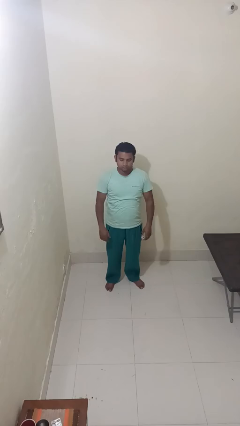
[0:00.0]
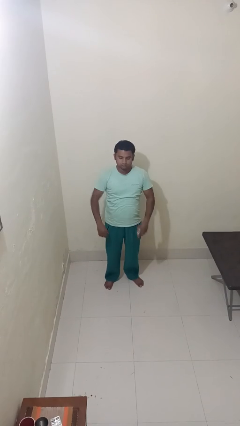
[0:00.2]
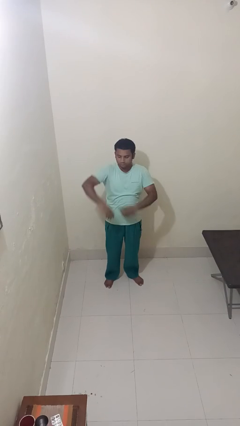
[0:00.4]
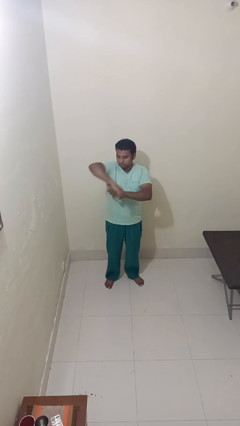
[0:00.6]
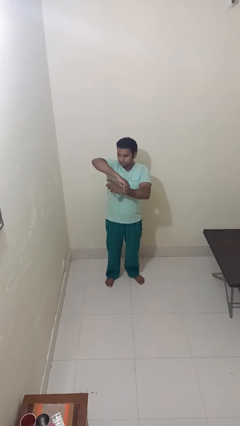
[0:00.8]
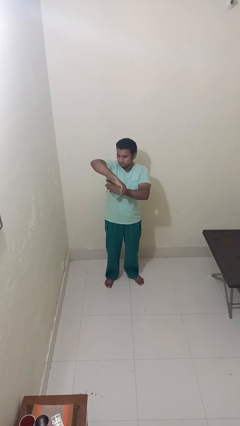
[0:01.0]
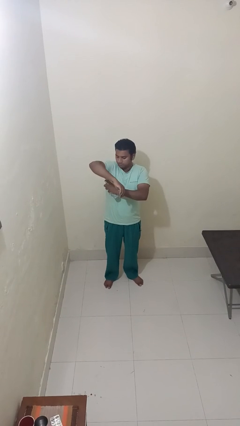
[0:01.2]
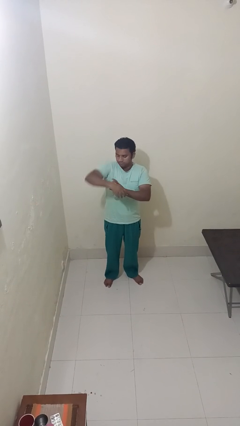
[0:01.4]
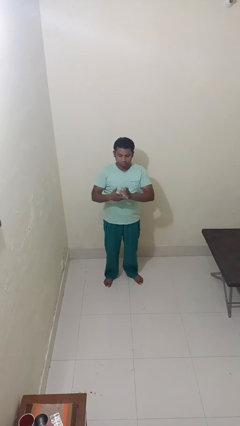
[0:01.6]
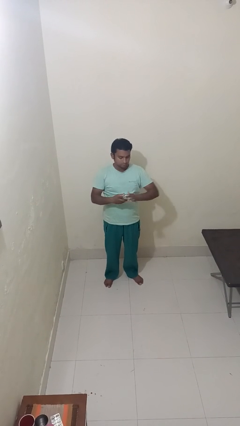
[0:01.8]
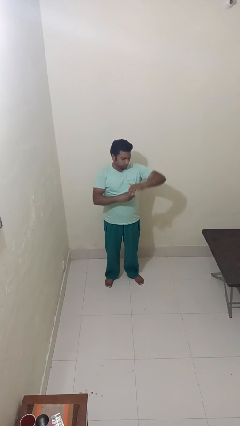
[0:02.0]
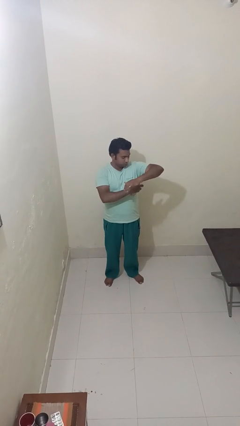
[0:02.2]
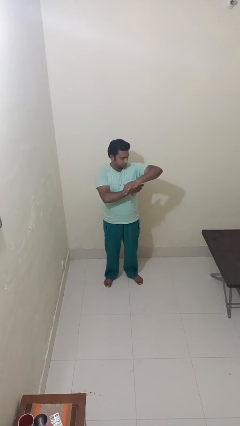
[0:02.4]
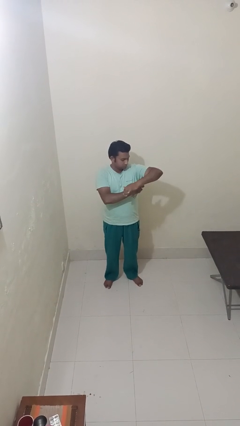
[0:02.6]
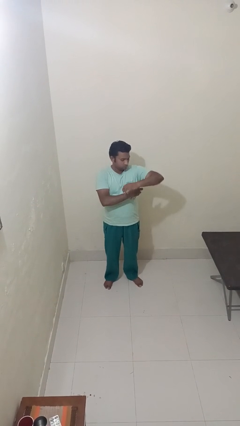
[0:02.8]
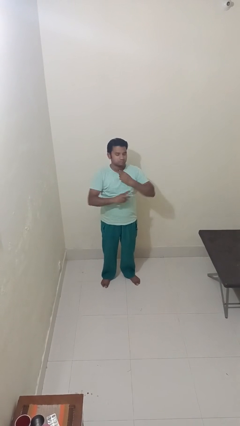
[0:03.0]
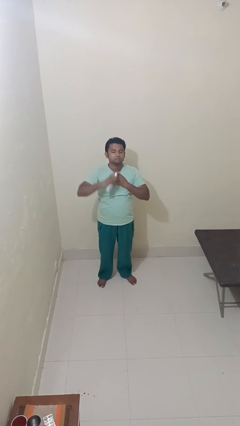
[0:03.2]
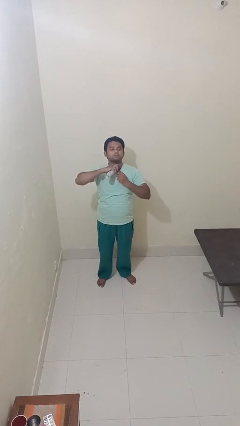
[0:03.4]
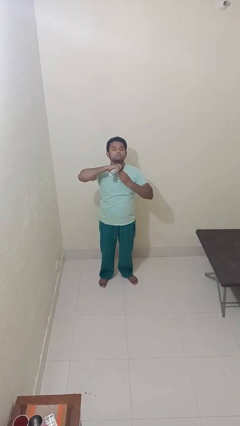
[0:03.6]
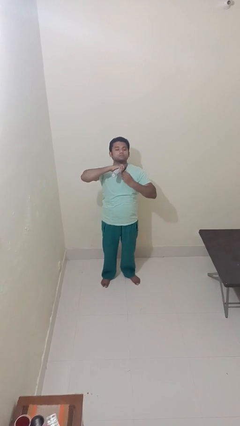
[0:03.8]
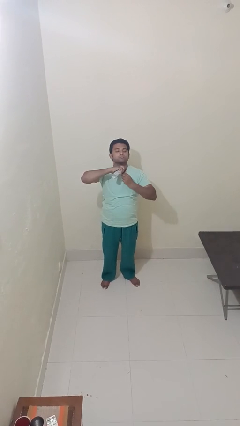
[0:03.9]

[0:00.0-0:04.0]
person applies deodorant

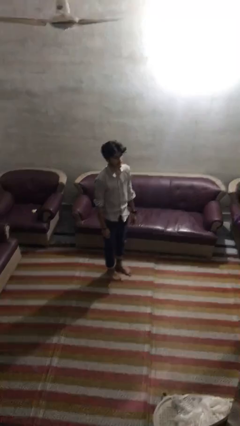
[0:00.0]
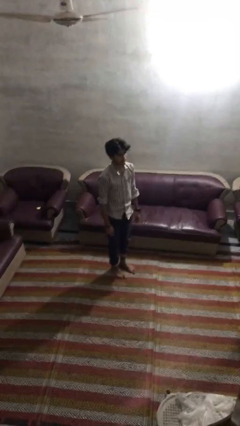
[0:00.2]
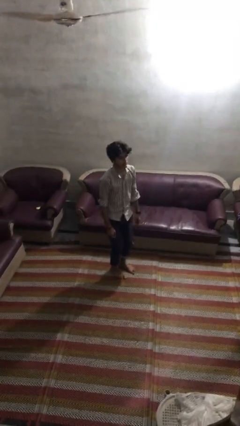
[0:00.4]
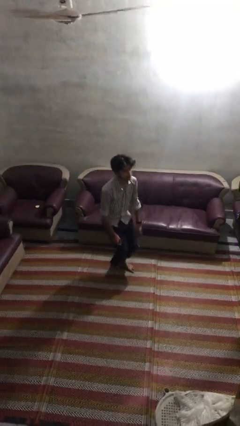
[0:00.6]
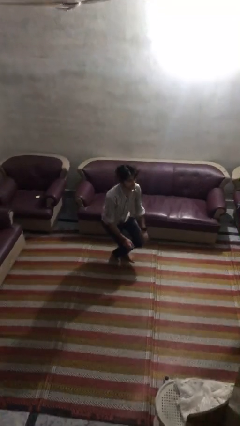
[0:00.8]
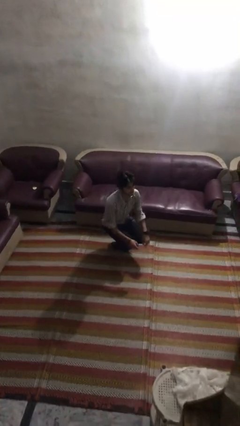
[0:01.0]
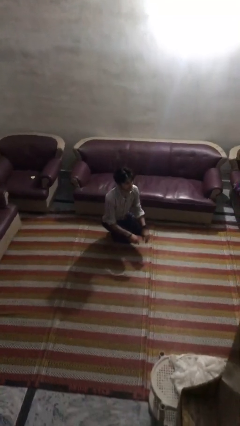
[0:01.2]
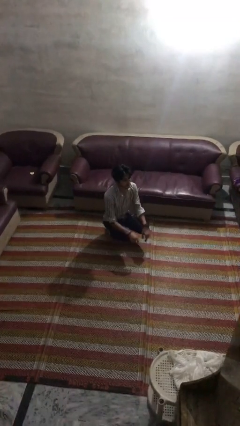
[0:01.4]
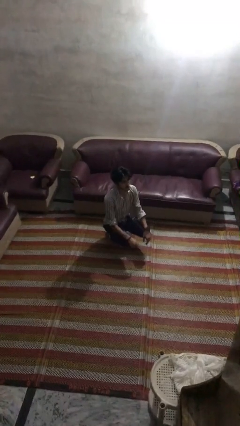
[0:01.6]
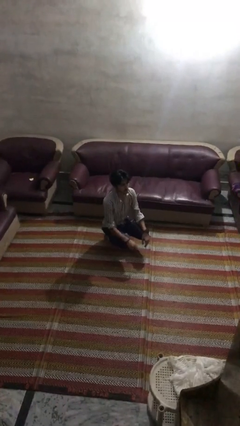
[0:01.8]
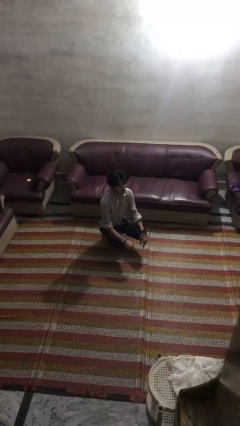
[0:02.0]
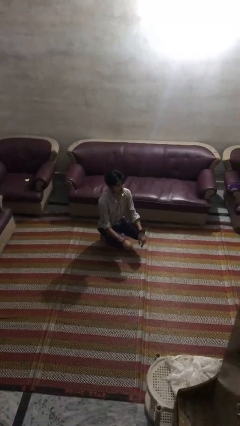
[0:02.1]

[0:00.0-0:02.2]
person squats

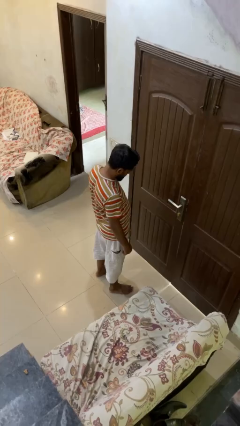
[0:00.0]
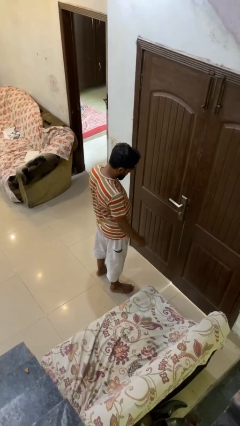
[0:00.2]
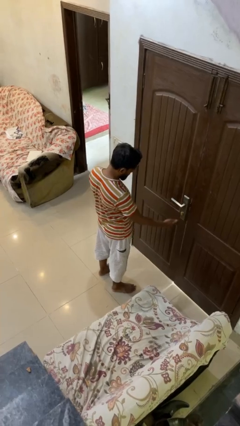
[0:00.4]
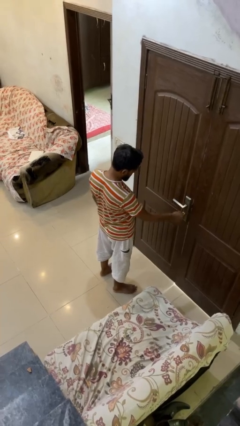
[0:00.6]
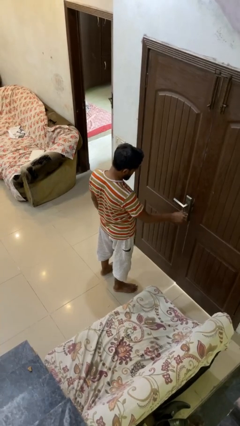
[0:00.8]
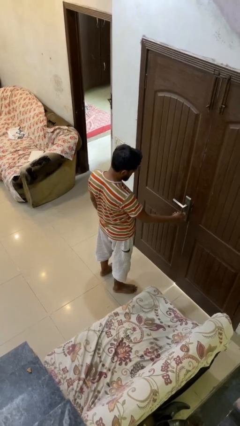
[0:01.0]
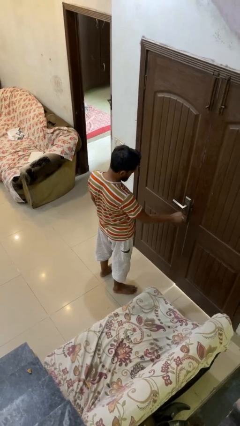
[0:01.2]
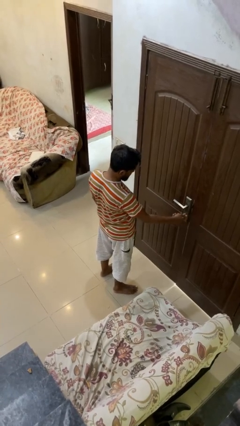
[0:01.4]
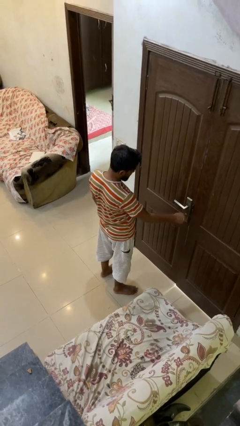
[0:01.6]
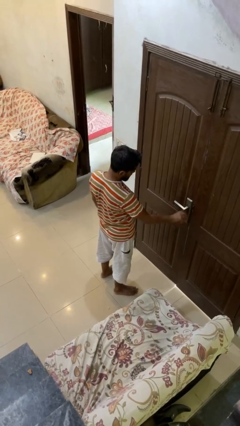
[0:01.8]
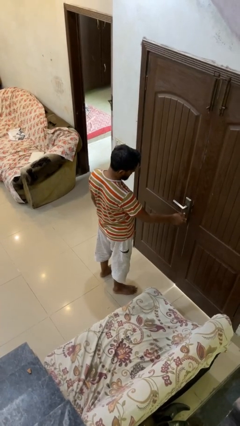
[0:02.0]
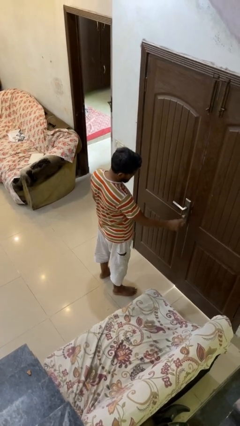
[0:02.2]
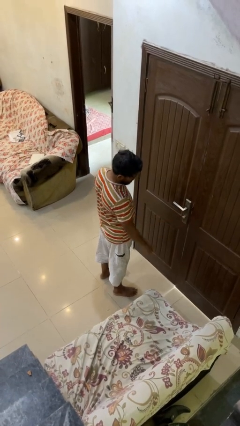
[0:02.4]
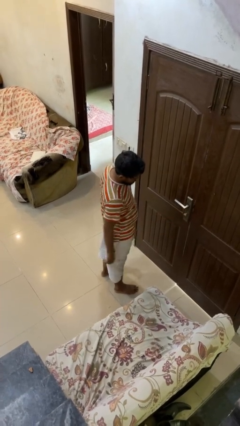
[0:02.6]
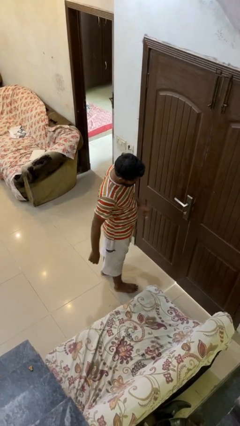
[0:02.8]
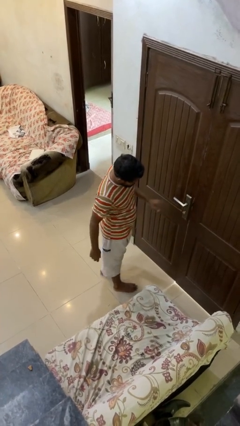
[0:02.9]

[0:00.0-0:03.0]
person unlocks door with keys

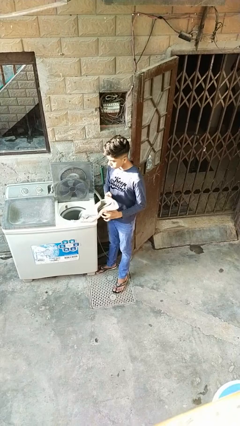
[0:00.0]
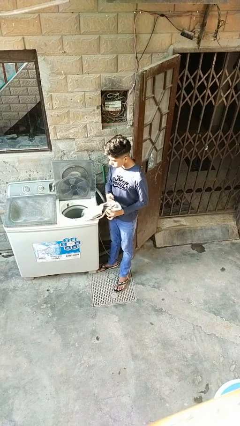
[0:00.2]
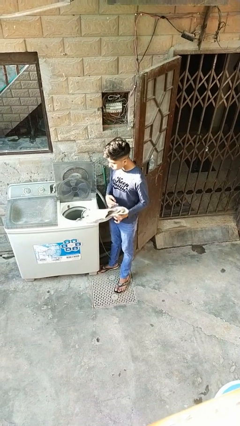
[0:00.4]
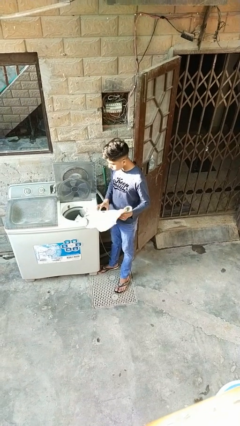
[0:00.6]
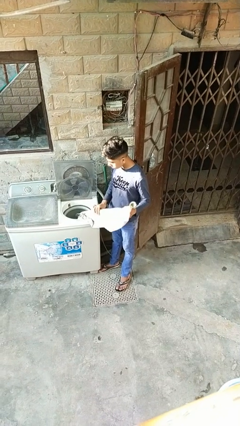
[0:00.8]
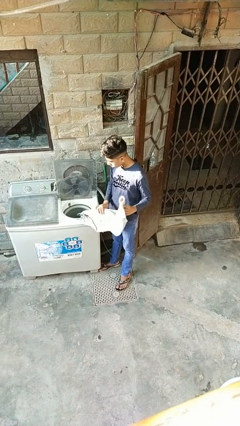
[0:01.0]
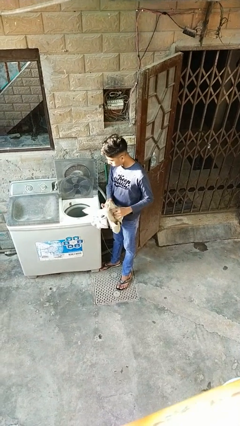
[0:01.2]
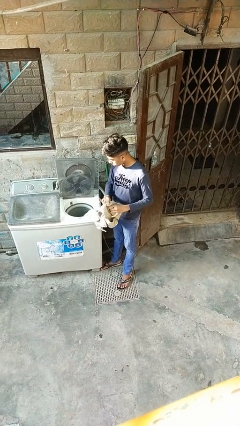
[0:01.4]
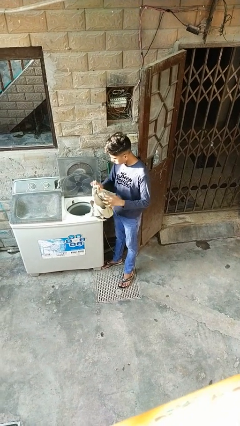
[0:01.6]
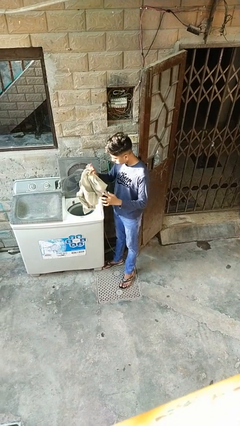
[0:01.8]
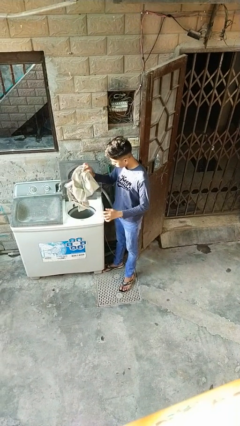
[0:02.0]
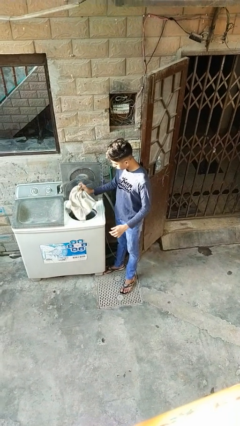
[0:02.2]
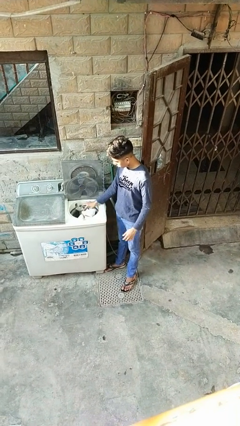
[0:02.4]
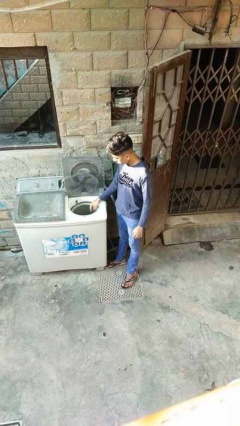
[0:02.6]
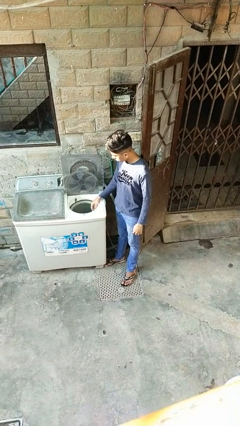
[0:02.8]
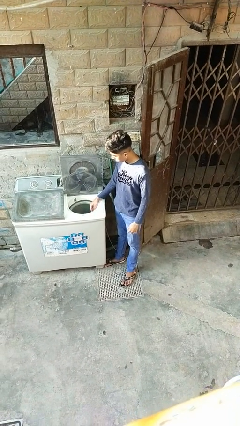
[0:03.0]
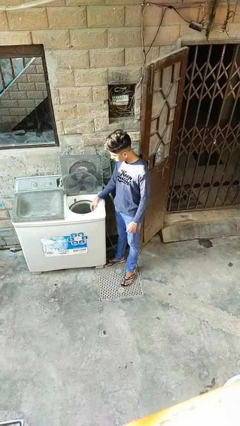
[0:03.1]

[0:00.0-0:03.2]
person loads dryer

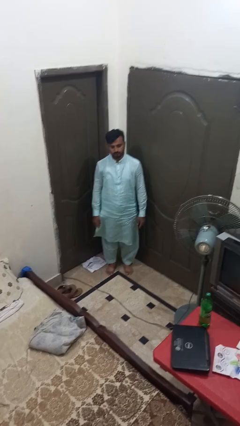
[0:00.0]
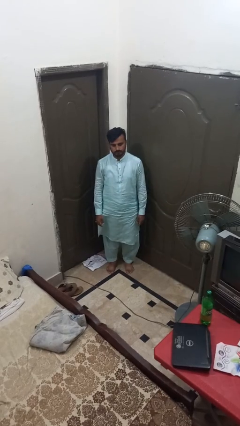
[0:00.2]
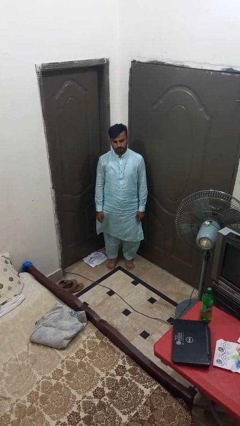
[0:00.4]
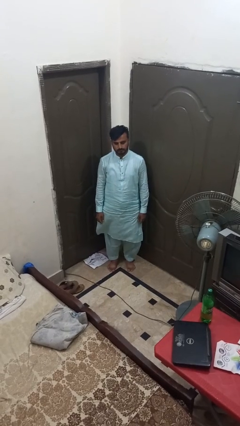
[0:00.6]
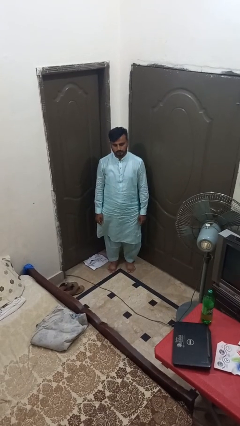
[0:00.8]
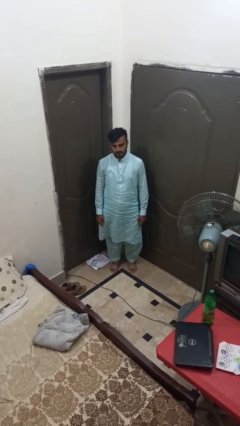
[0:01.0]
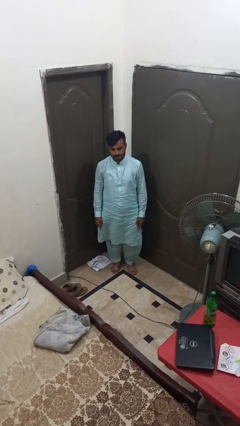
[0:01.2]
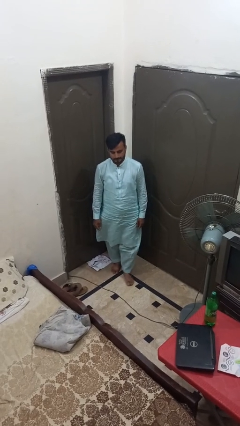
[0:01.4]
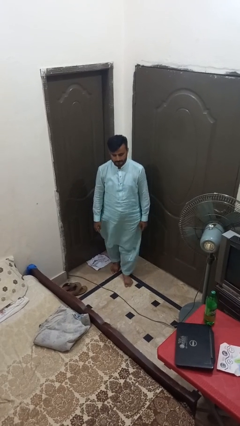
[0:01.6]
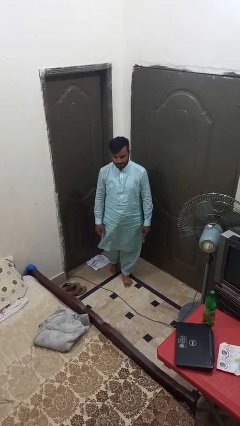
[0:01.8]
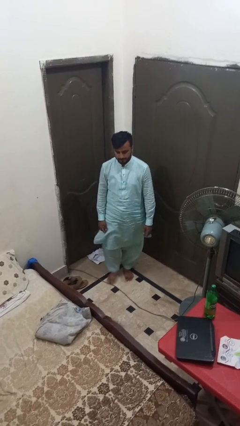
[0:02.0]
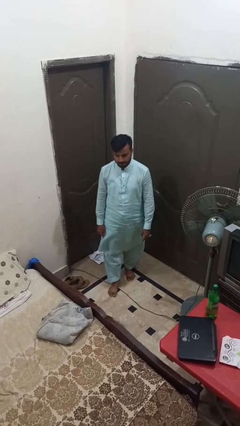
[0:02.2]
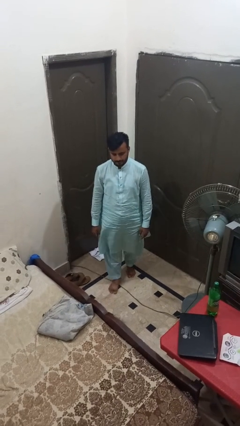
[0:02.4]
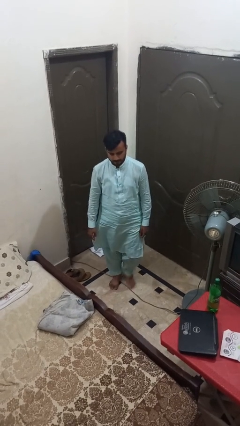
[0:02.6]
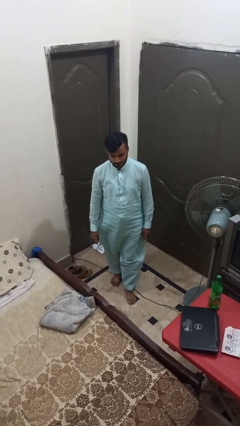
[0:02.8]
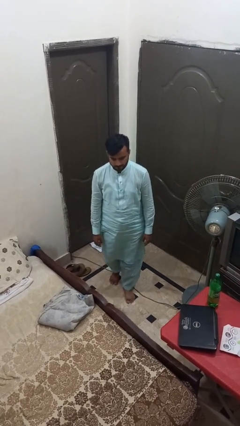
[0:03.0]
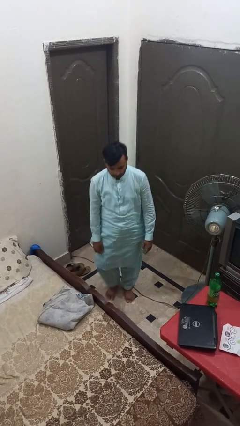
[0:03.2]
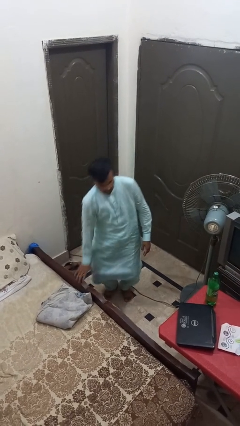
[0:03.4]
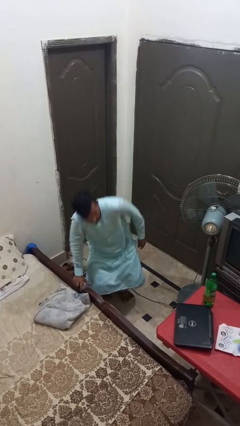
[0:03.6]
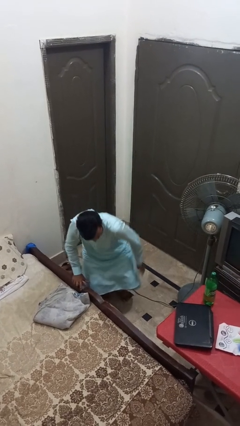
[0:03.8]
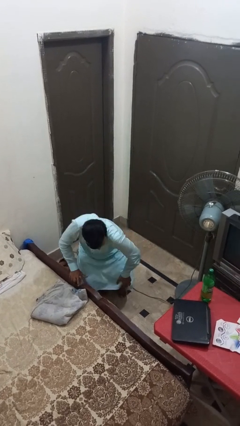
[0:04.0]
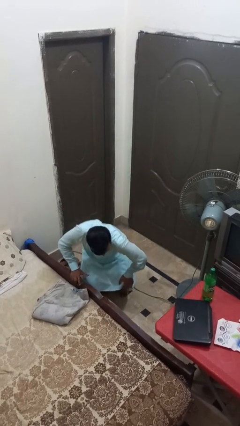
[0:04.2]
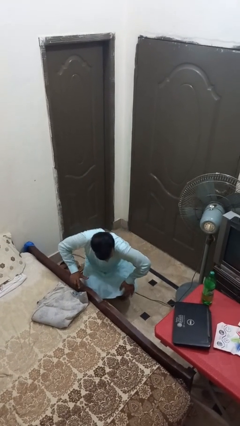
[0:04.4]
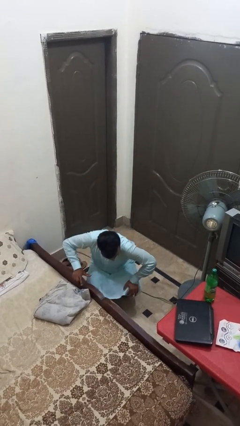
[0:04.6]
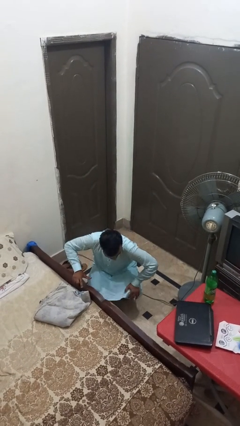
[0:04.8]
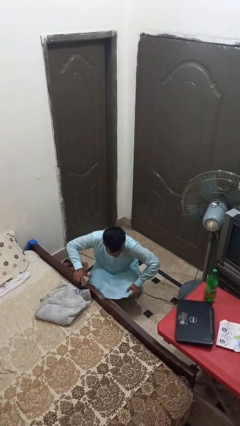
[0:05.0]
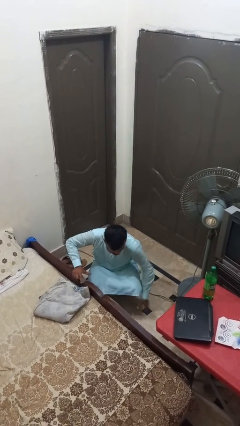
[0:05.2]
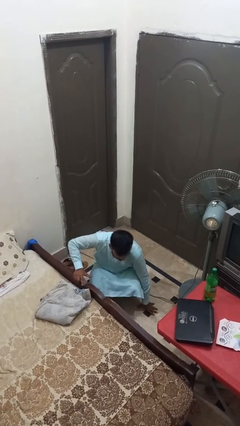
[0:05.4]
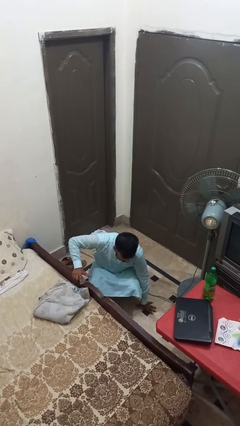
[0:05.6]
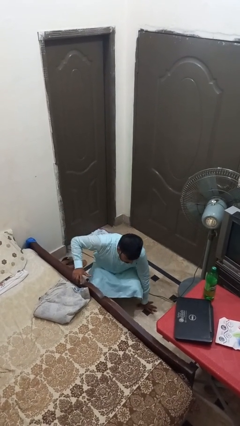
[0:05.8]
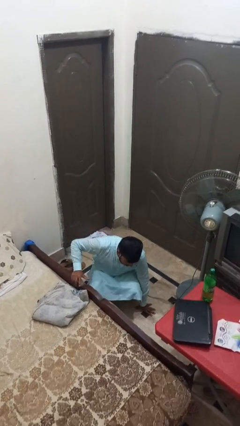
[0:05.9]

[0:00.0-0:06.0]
person trips on object on floor
